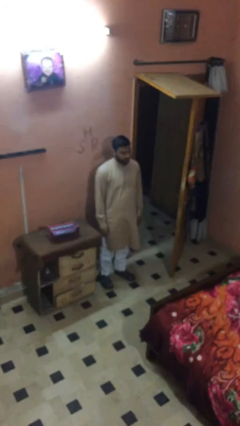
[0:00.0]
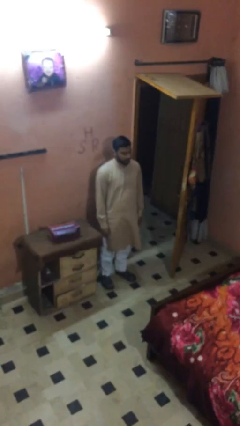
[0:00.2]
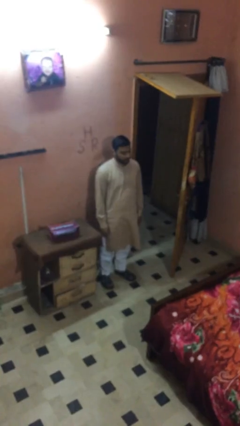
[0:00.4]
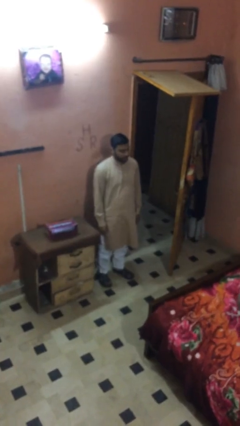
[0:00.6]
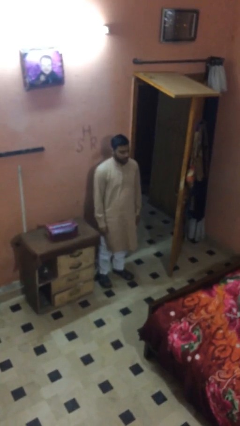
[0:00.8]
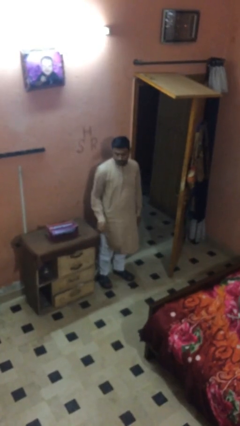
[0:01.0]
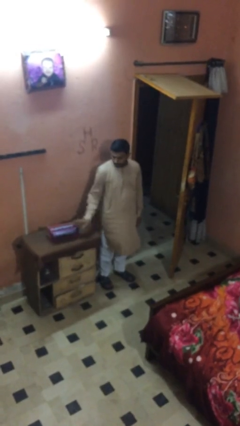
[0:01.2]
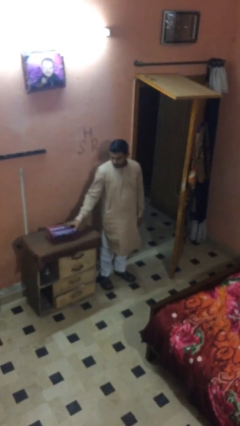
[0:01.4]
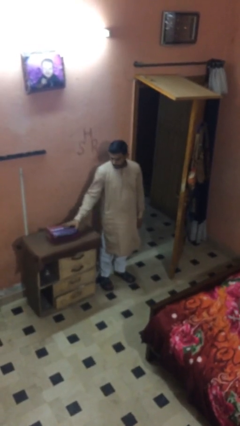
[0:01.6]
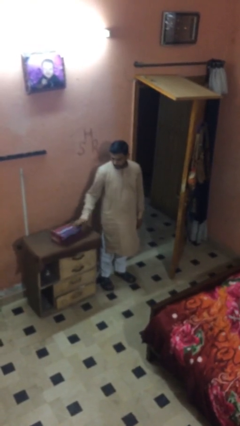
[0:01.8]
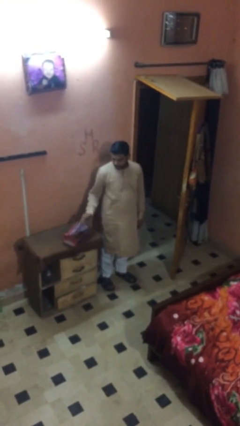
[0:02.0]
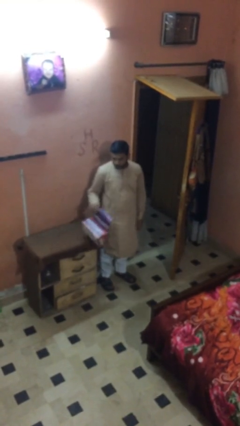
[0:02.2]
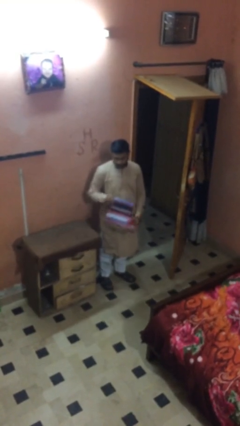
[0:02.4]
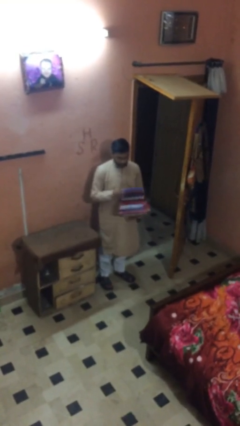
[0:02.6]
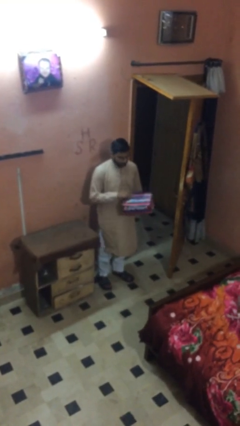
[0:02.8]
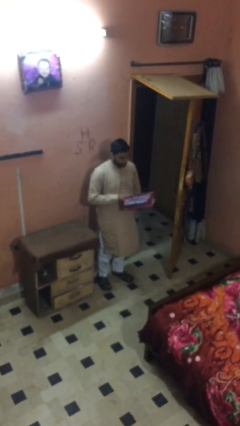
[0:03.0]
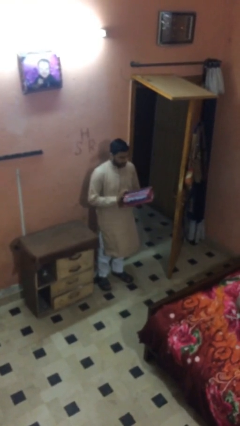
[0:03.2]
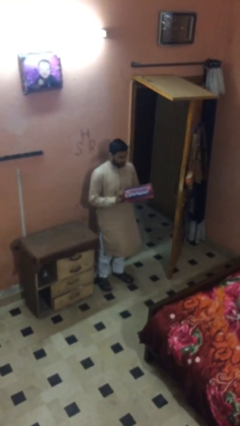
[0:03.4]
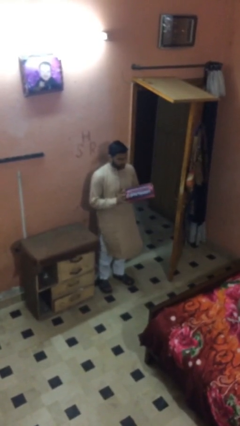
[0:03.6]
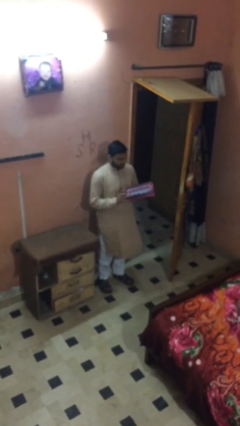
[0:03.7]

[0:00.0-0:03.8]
person picks up object from table

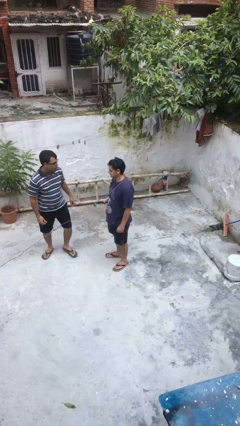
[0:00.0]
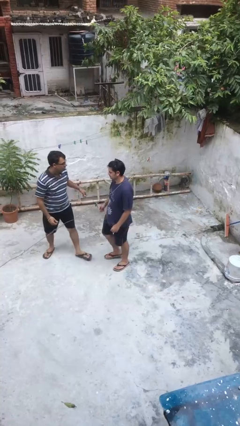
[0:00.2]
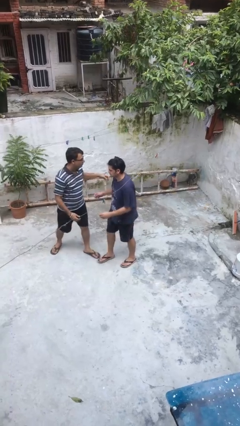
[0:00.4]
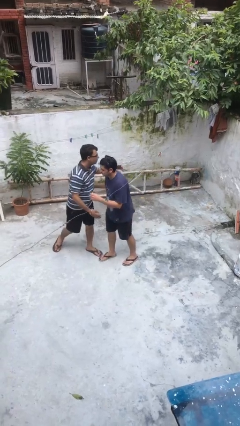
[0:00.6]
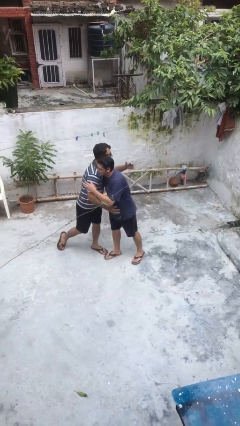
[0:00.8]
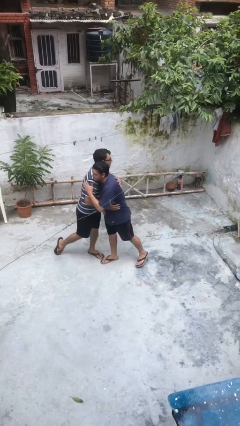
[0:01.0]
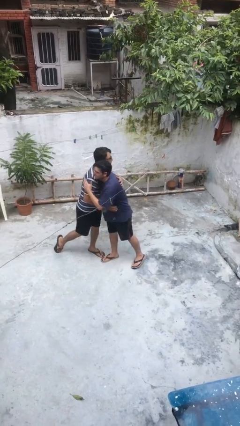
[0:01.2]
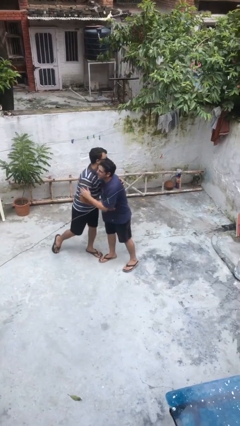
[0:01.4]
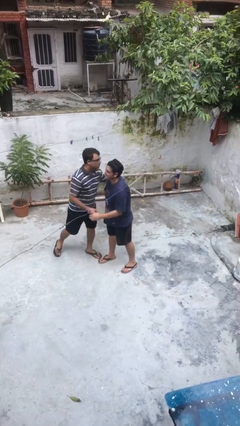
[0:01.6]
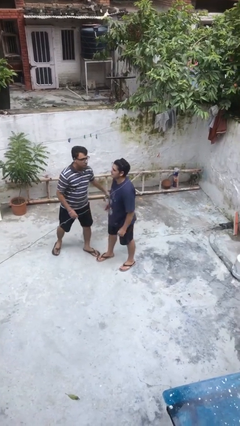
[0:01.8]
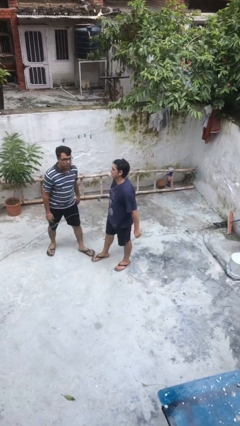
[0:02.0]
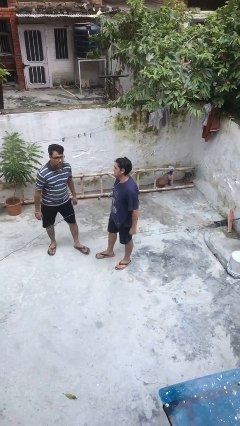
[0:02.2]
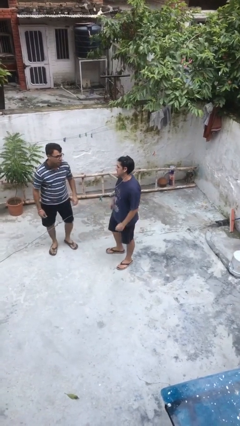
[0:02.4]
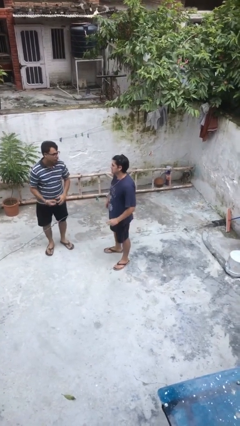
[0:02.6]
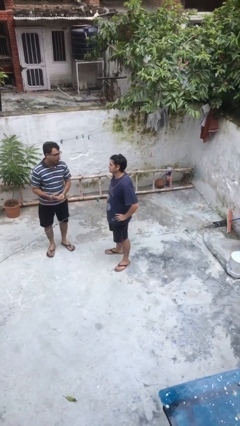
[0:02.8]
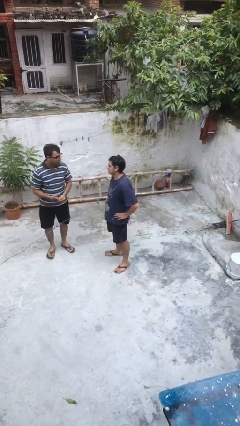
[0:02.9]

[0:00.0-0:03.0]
person embraces person

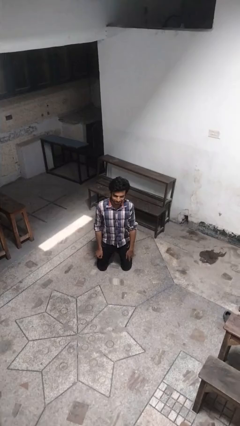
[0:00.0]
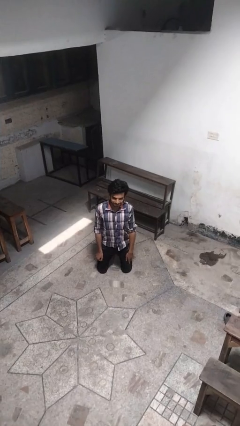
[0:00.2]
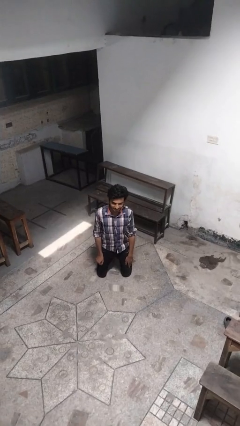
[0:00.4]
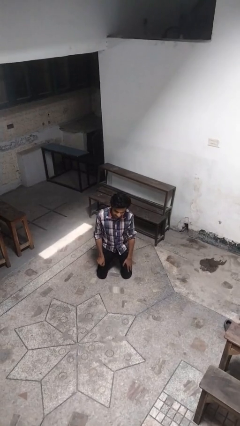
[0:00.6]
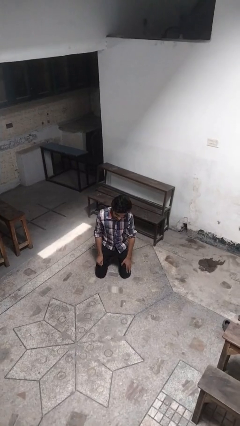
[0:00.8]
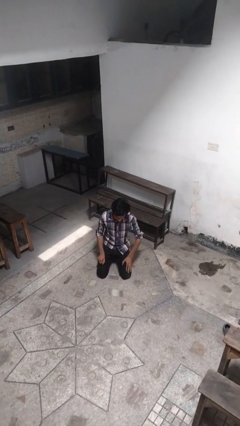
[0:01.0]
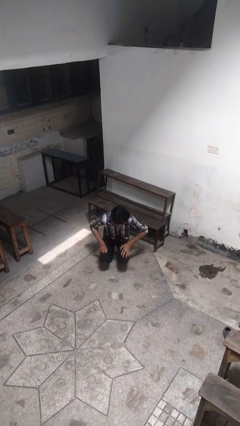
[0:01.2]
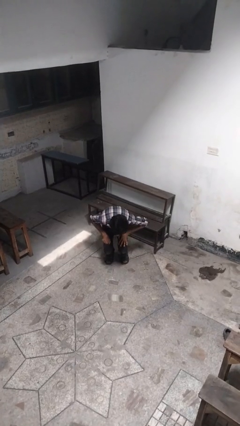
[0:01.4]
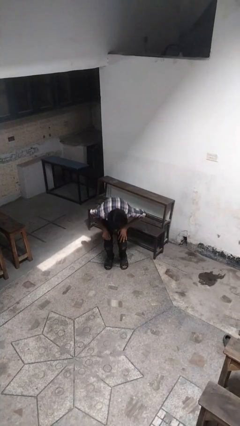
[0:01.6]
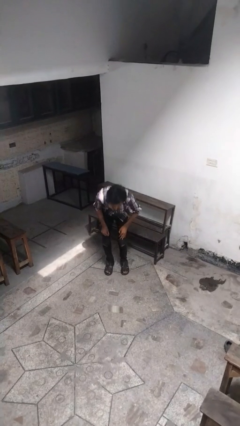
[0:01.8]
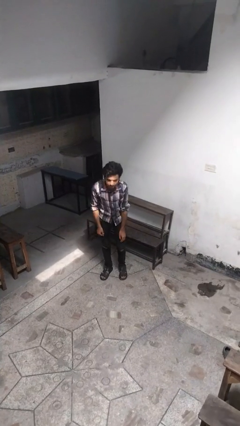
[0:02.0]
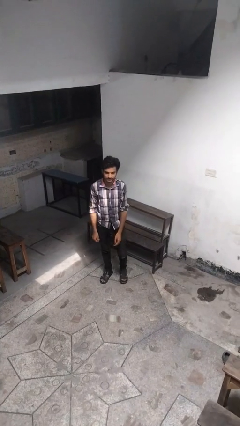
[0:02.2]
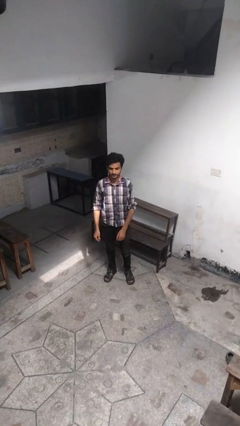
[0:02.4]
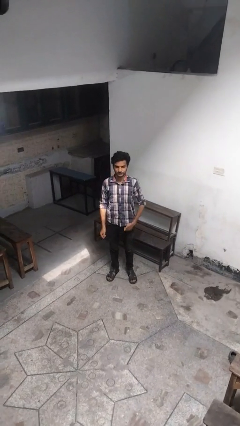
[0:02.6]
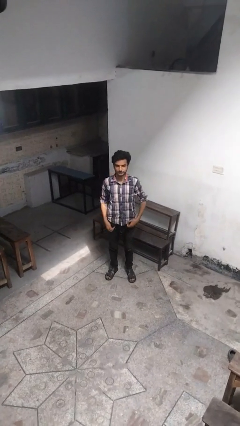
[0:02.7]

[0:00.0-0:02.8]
person stands up from floor

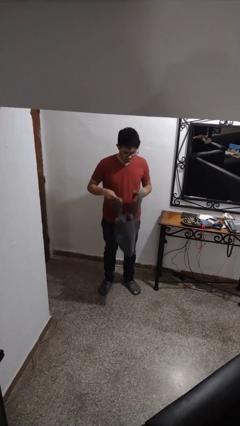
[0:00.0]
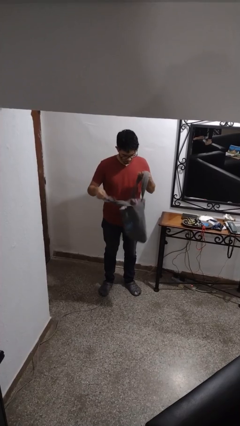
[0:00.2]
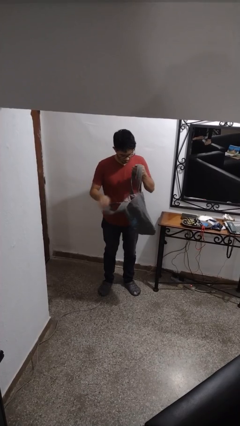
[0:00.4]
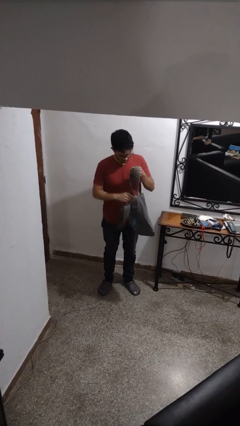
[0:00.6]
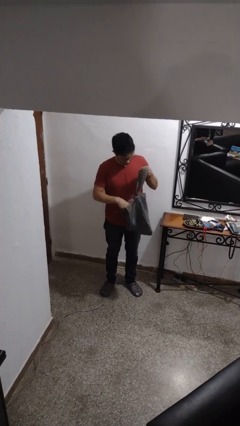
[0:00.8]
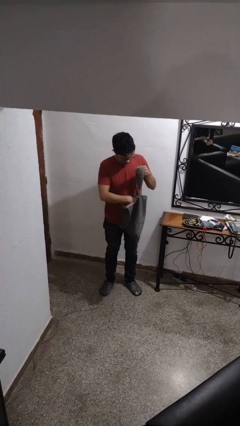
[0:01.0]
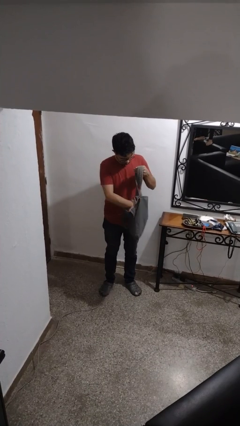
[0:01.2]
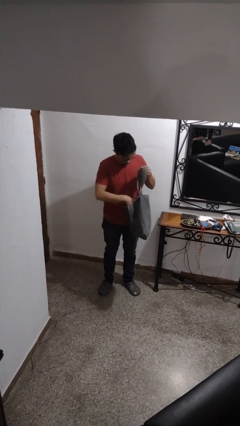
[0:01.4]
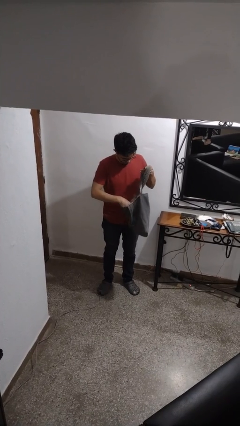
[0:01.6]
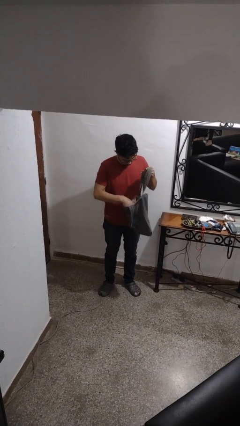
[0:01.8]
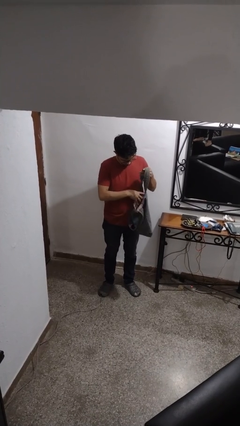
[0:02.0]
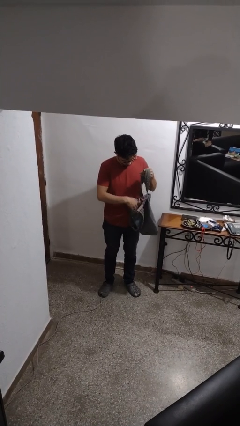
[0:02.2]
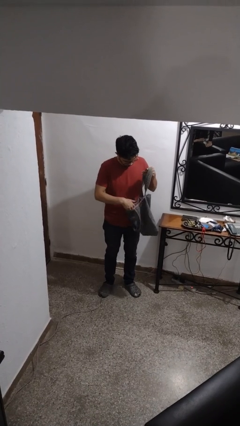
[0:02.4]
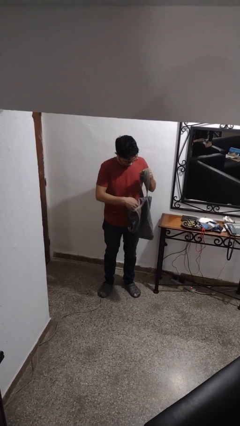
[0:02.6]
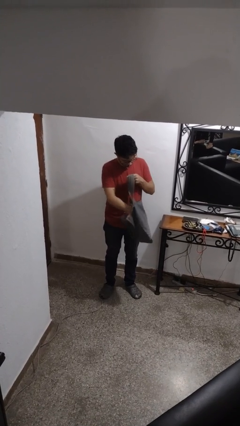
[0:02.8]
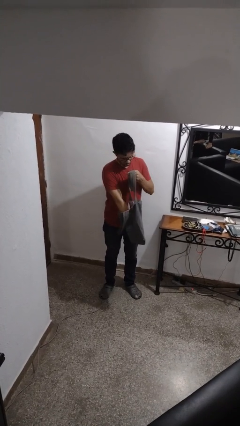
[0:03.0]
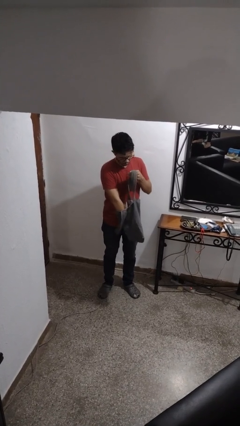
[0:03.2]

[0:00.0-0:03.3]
person searches in purse

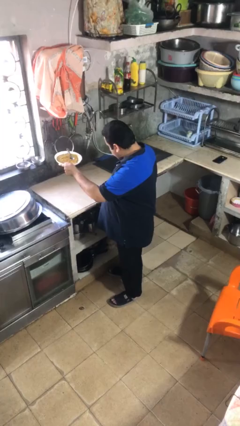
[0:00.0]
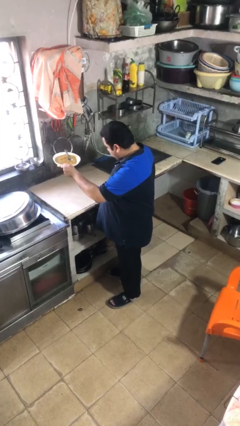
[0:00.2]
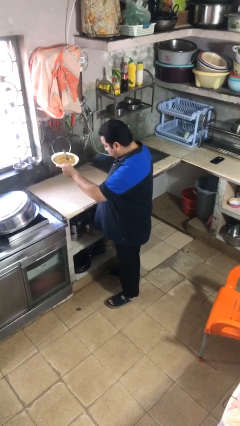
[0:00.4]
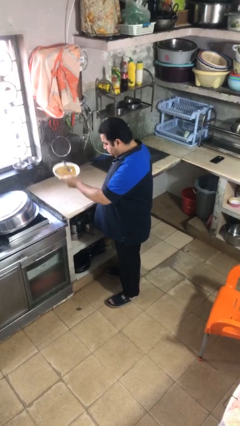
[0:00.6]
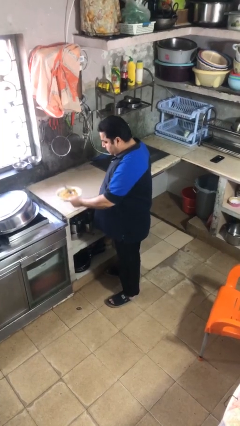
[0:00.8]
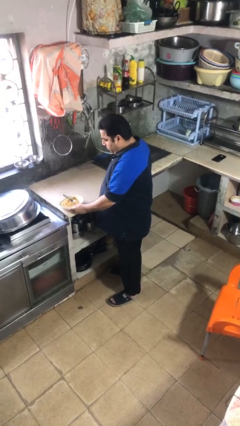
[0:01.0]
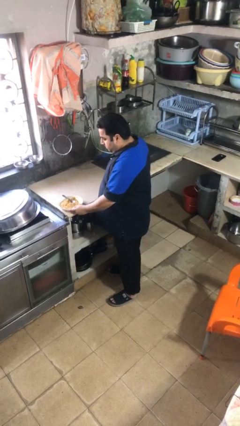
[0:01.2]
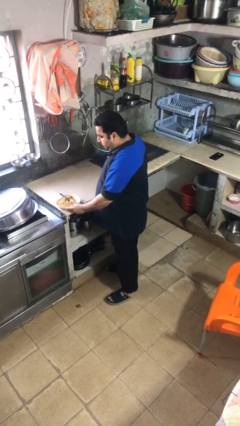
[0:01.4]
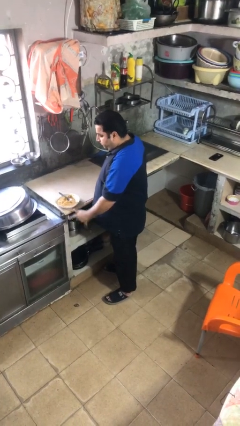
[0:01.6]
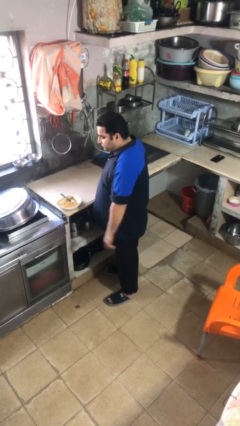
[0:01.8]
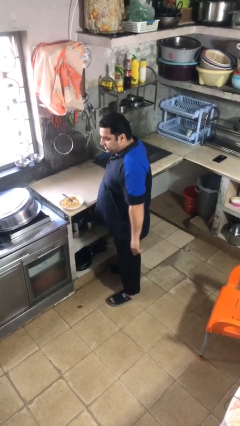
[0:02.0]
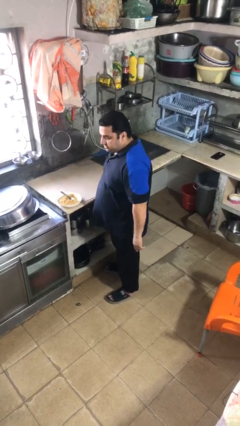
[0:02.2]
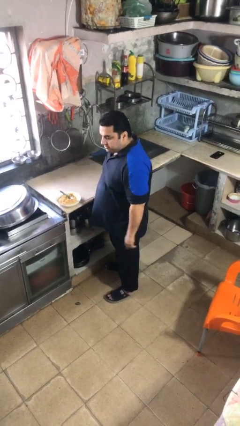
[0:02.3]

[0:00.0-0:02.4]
person puts down object on countertop

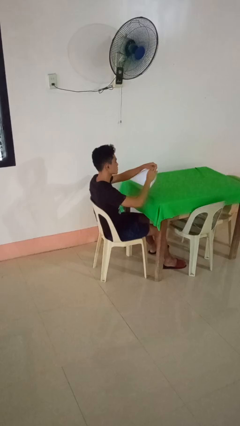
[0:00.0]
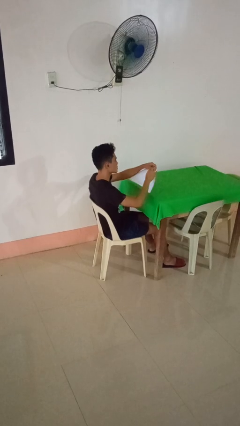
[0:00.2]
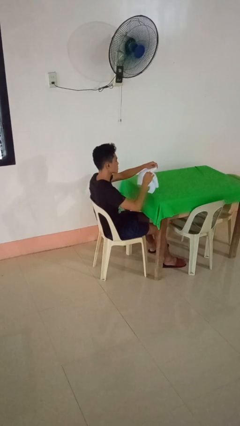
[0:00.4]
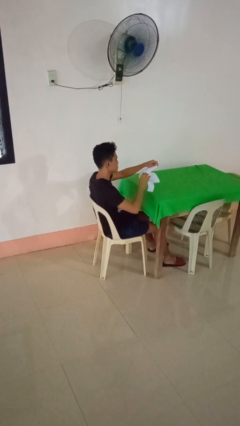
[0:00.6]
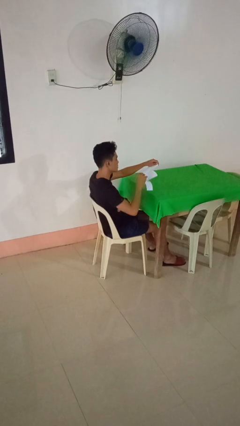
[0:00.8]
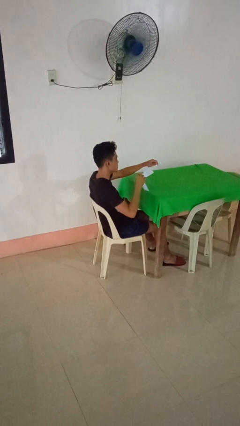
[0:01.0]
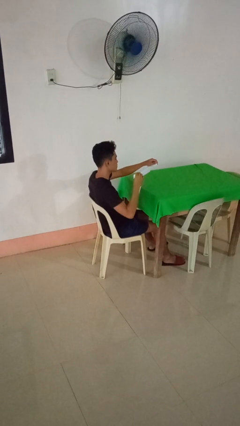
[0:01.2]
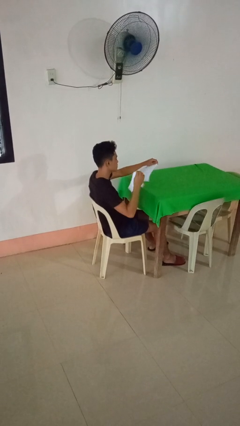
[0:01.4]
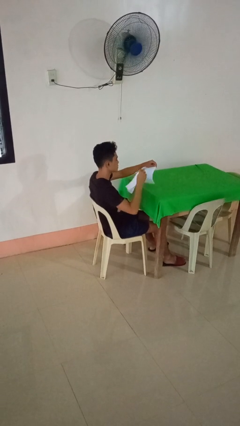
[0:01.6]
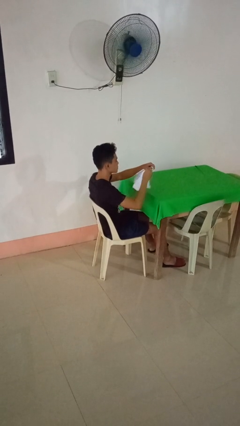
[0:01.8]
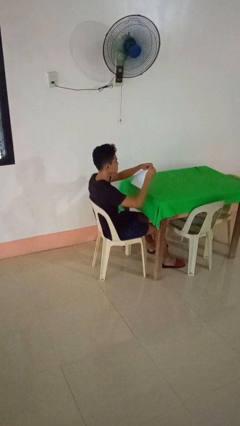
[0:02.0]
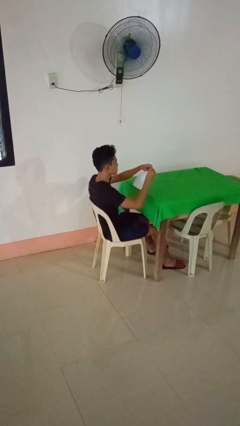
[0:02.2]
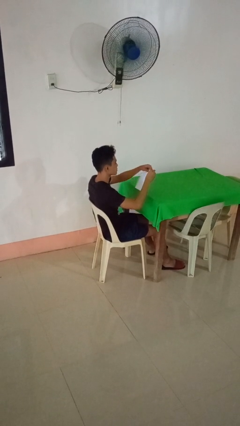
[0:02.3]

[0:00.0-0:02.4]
person tears paper
